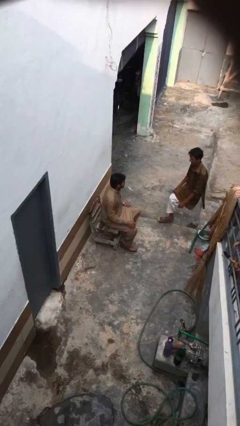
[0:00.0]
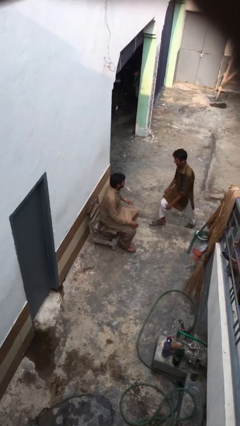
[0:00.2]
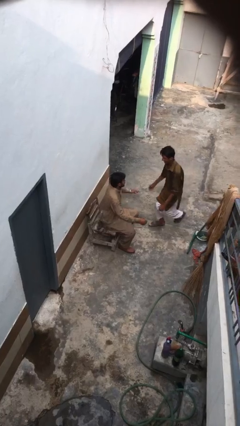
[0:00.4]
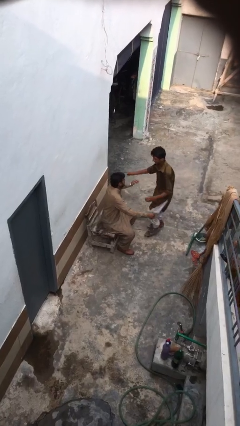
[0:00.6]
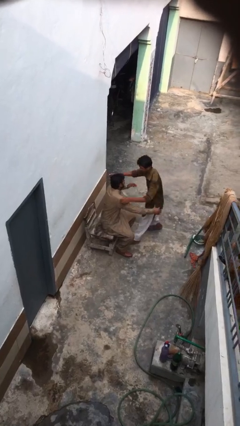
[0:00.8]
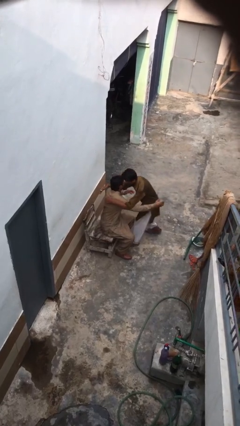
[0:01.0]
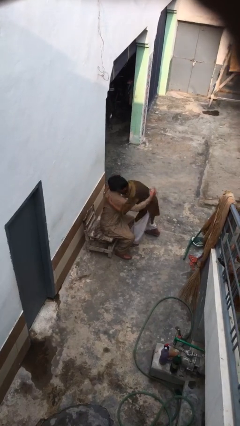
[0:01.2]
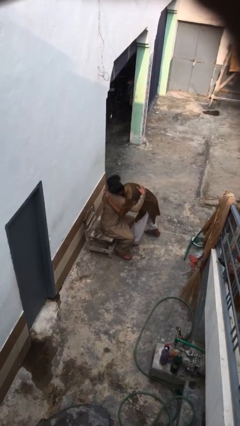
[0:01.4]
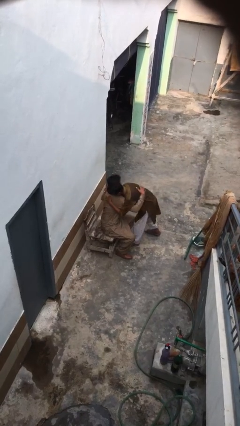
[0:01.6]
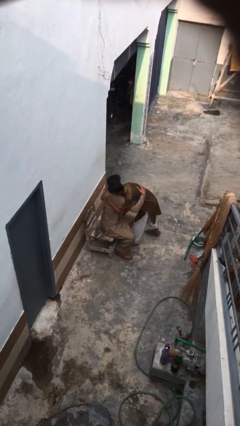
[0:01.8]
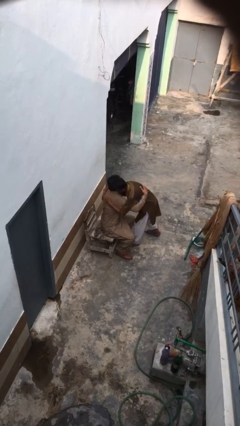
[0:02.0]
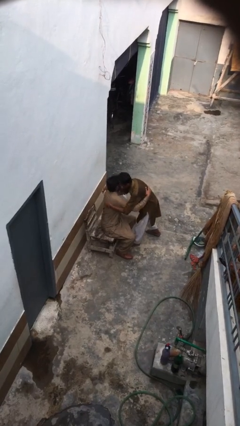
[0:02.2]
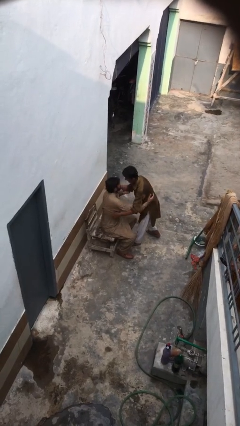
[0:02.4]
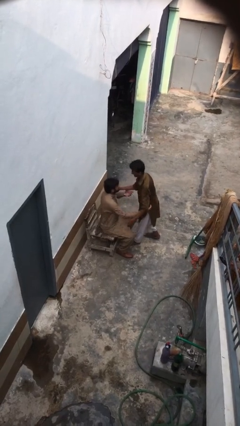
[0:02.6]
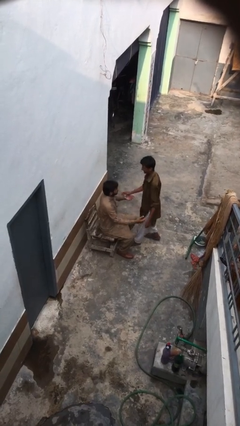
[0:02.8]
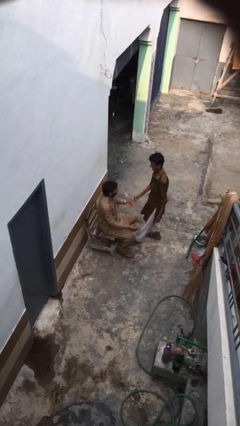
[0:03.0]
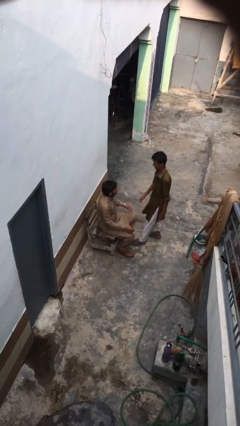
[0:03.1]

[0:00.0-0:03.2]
person embraces person

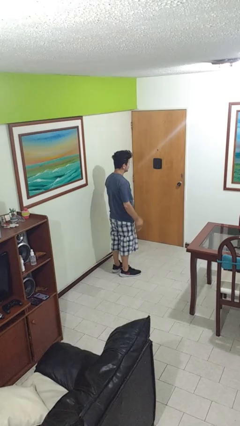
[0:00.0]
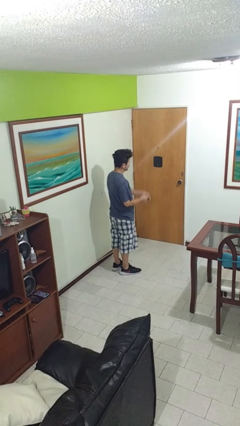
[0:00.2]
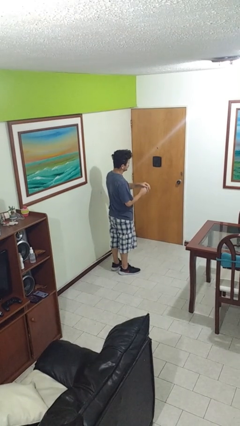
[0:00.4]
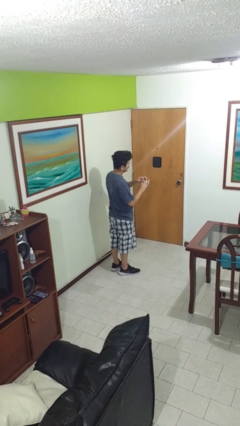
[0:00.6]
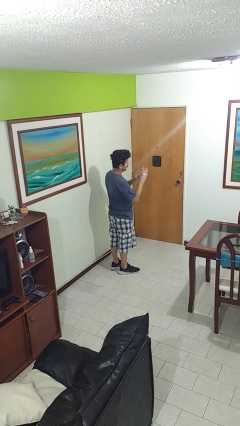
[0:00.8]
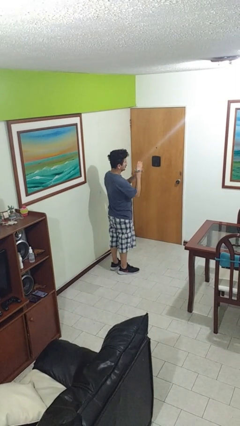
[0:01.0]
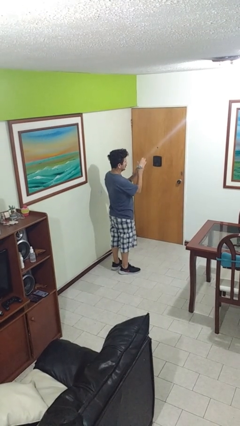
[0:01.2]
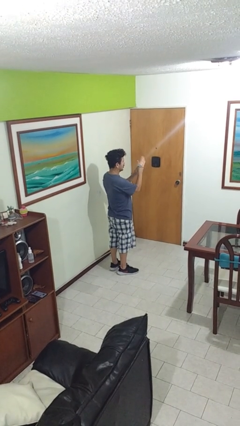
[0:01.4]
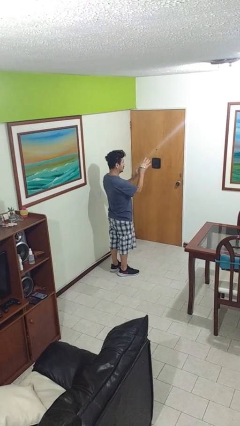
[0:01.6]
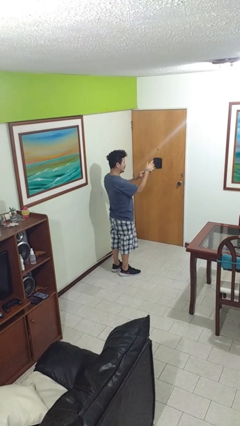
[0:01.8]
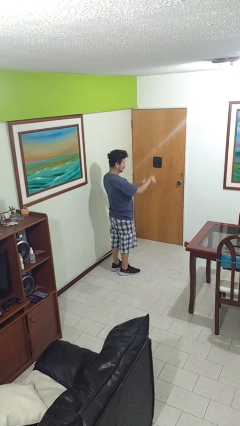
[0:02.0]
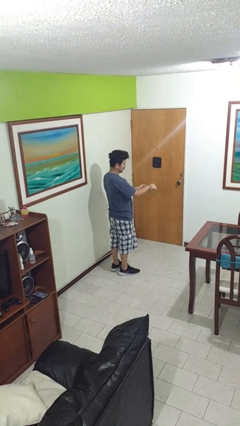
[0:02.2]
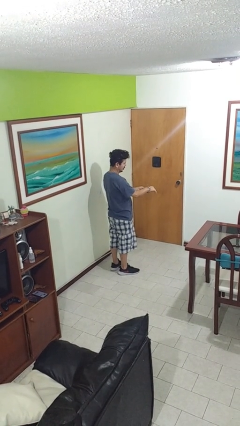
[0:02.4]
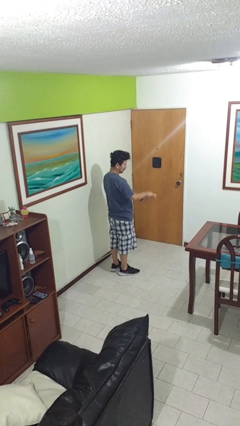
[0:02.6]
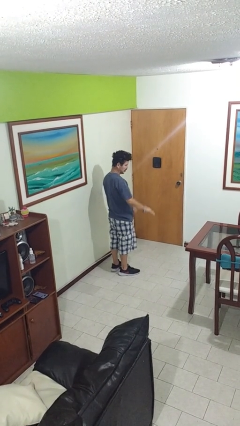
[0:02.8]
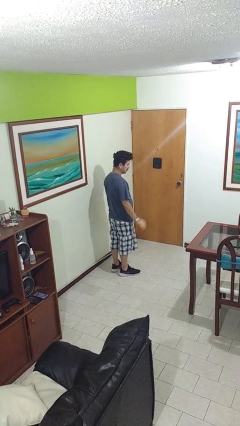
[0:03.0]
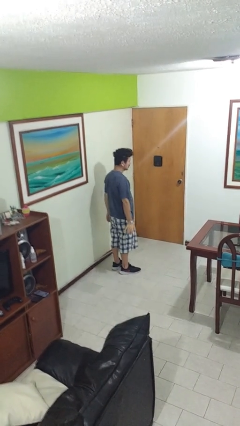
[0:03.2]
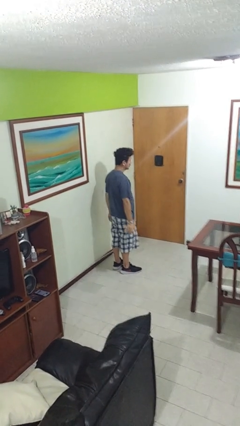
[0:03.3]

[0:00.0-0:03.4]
person puts on wristwatch

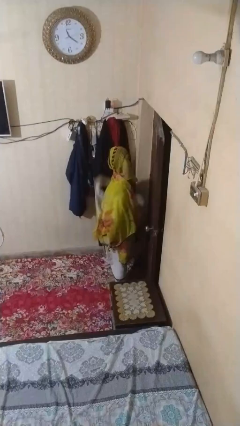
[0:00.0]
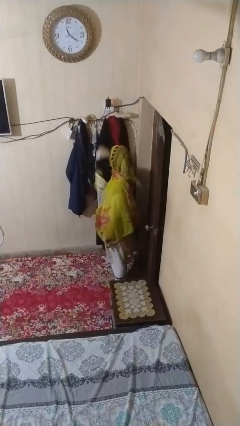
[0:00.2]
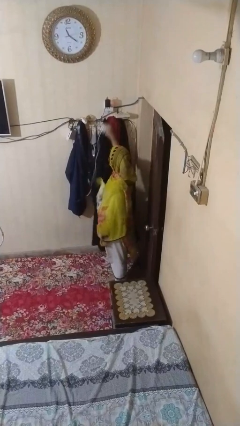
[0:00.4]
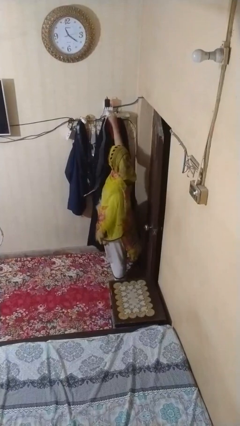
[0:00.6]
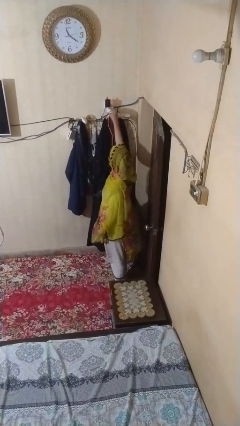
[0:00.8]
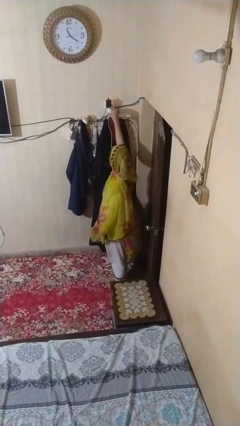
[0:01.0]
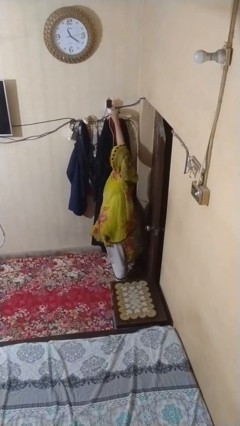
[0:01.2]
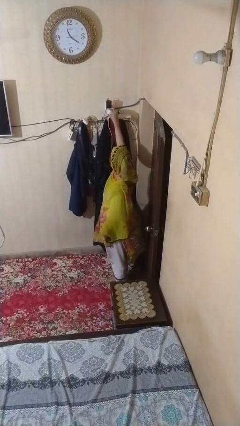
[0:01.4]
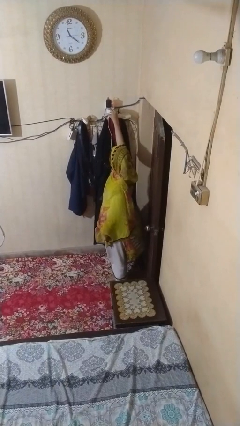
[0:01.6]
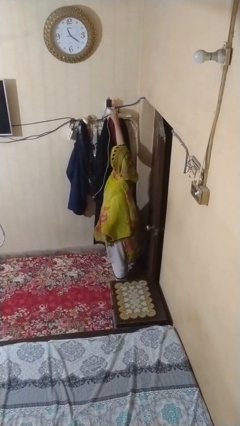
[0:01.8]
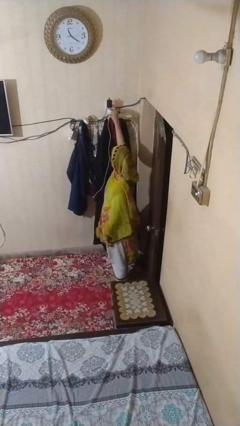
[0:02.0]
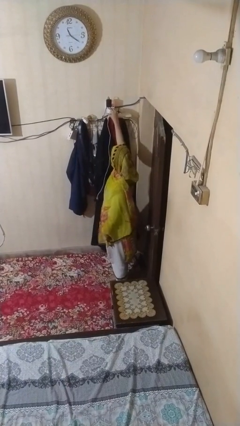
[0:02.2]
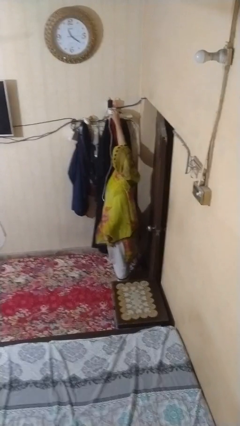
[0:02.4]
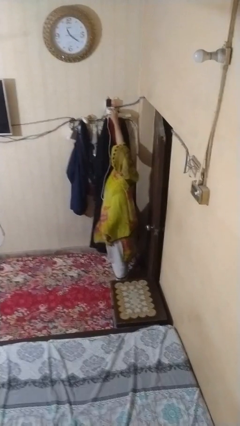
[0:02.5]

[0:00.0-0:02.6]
person plugs into electrical socket

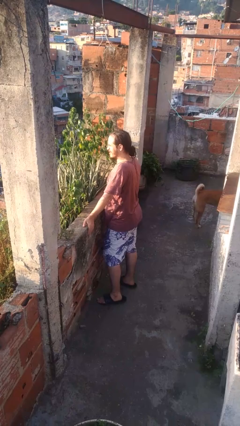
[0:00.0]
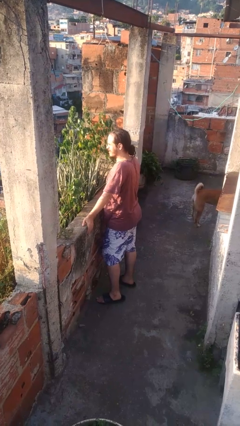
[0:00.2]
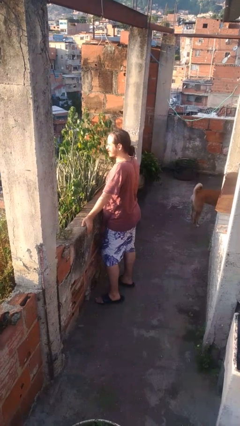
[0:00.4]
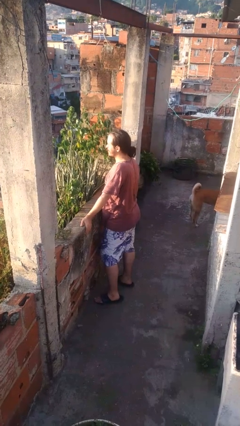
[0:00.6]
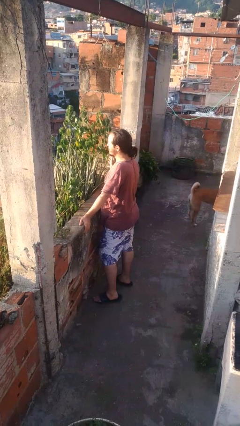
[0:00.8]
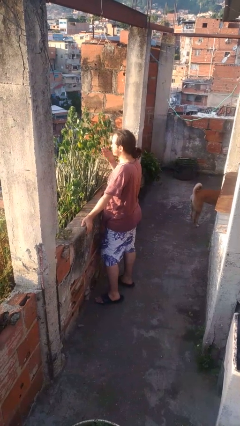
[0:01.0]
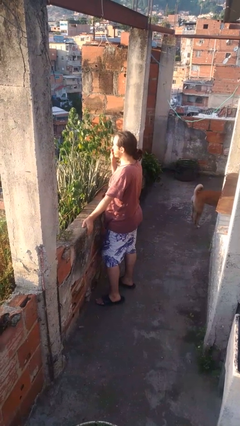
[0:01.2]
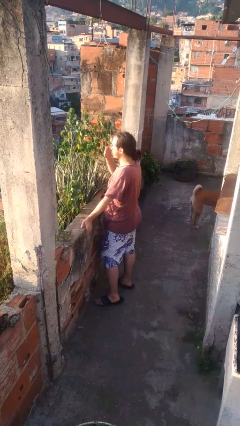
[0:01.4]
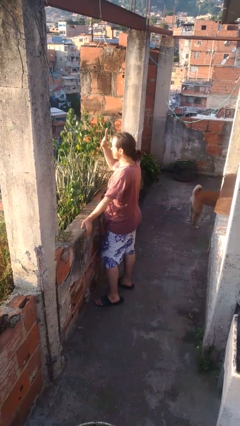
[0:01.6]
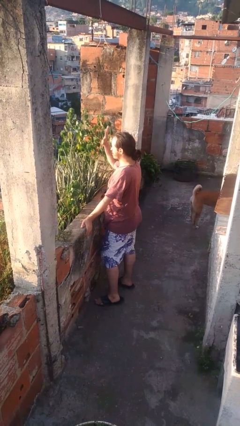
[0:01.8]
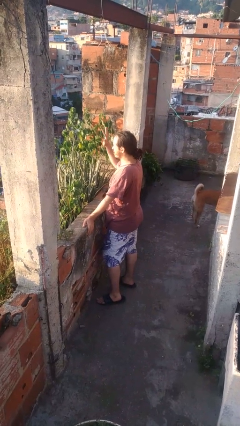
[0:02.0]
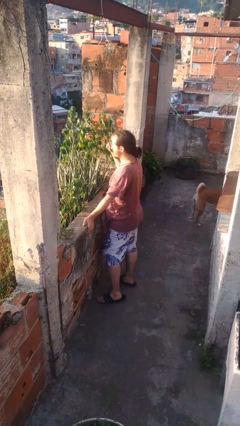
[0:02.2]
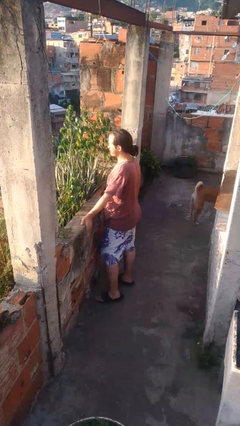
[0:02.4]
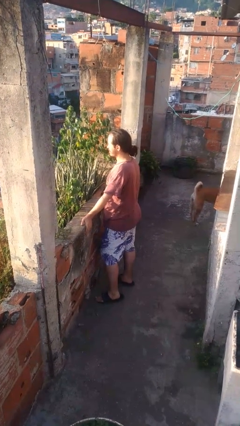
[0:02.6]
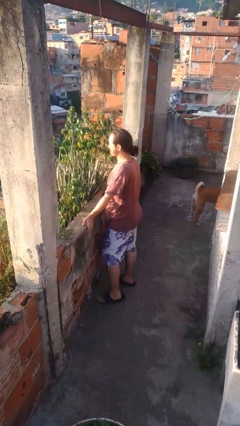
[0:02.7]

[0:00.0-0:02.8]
person gestures blow kiss

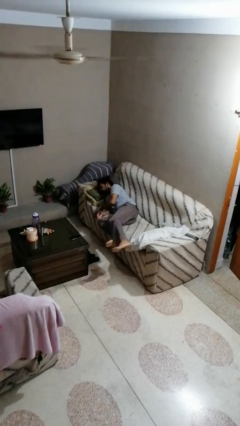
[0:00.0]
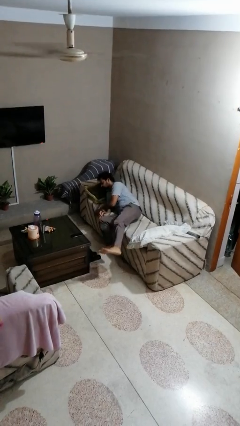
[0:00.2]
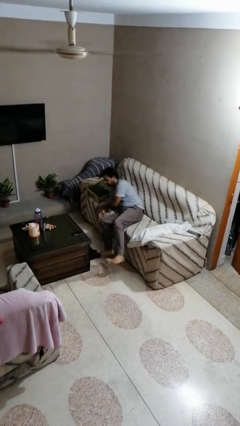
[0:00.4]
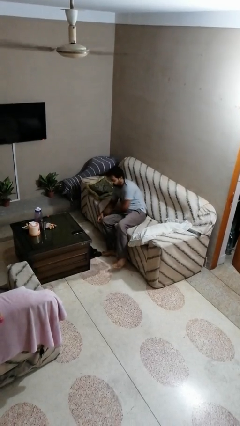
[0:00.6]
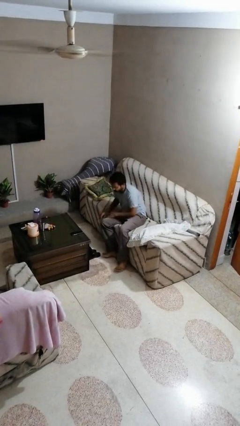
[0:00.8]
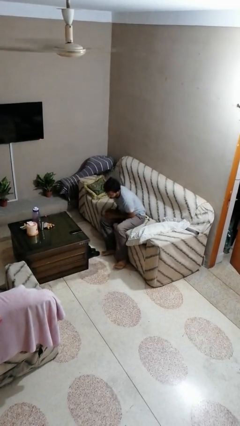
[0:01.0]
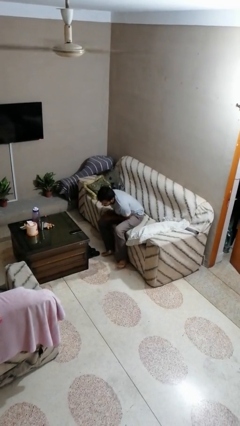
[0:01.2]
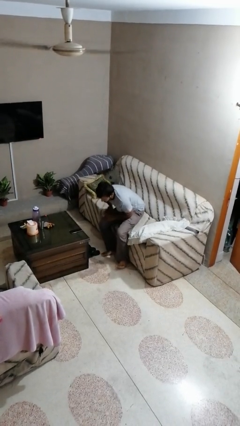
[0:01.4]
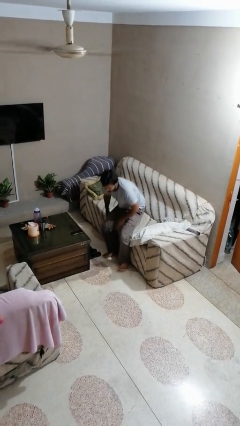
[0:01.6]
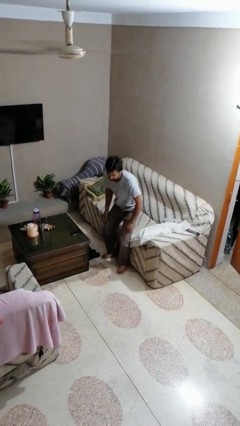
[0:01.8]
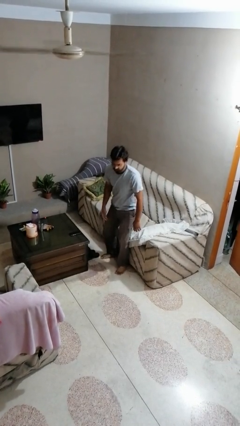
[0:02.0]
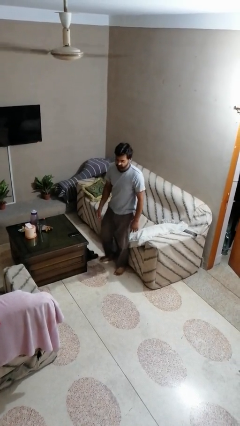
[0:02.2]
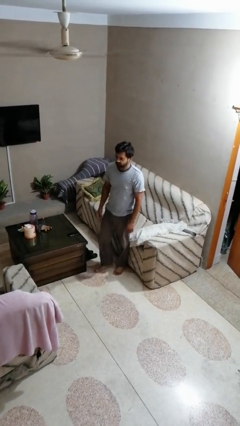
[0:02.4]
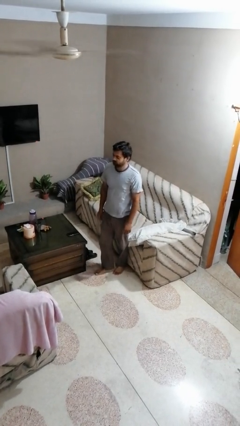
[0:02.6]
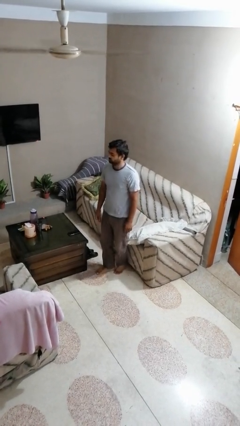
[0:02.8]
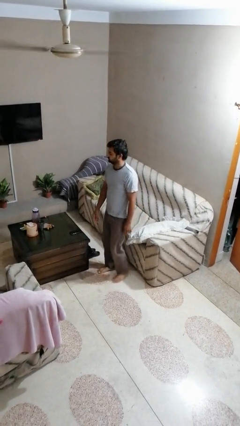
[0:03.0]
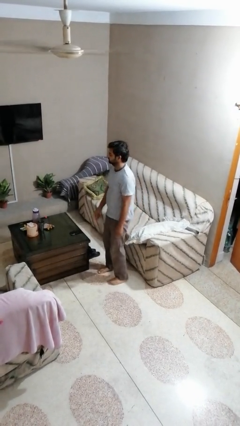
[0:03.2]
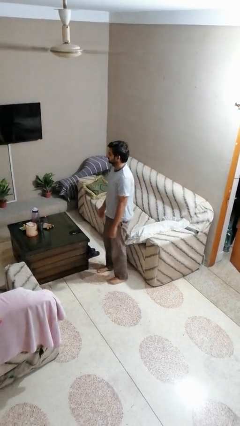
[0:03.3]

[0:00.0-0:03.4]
person stands up

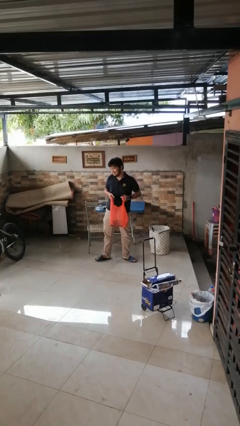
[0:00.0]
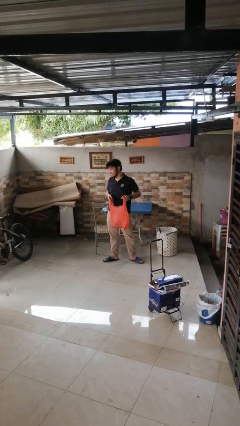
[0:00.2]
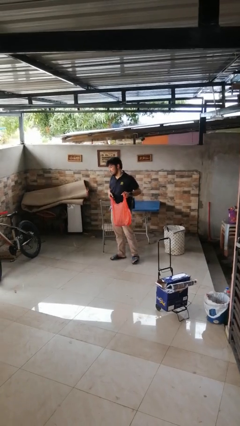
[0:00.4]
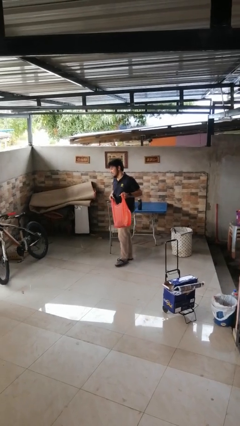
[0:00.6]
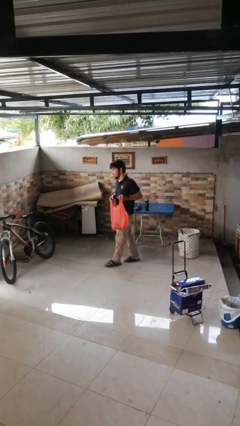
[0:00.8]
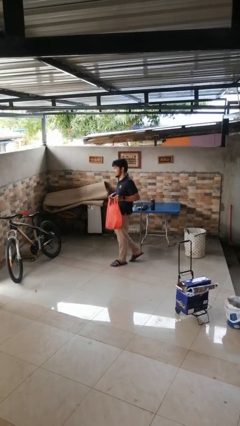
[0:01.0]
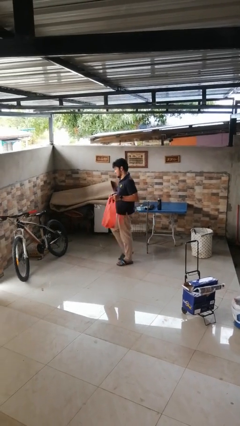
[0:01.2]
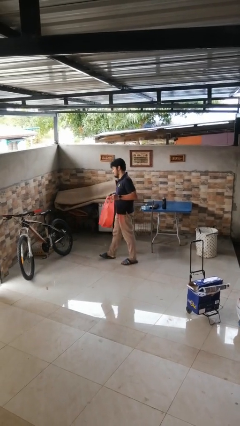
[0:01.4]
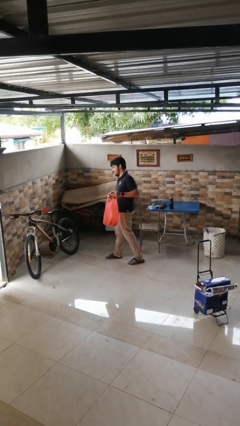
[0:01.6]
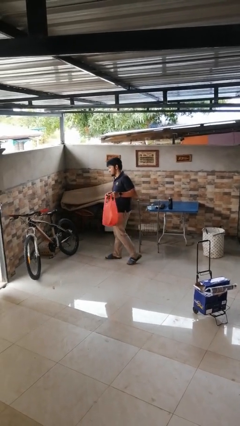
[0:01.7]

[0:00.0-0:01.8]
person carries groceries

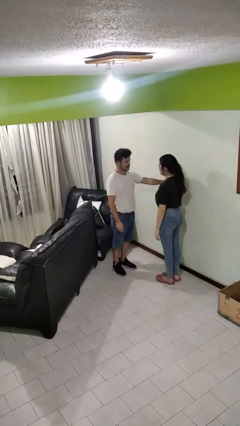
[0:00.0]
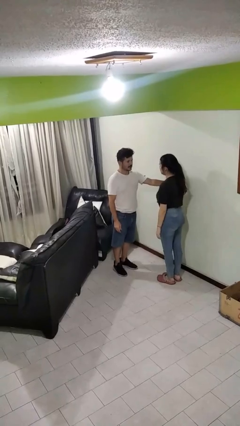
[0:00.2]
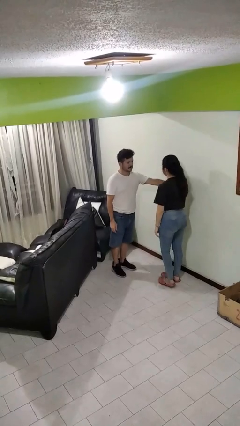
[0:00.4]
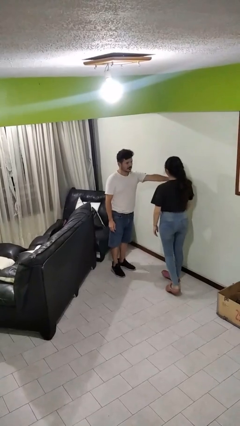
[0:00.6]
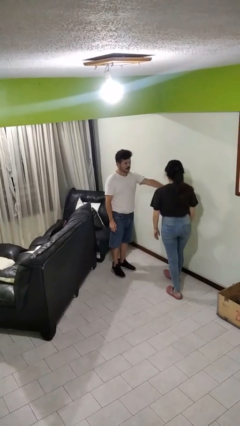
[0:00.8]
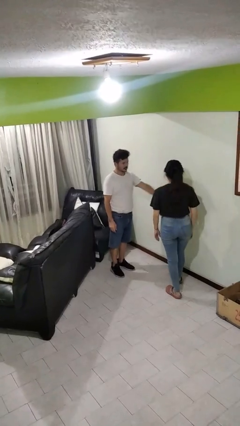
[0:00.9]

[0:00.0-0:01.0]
person shoves person
